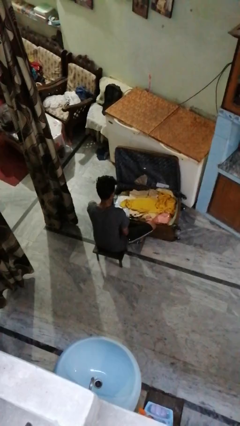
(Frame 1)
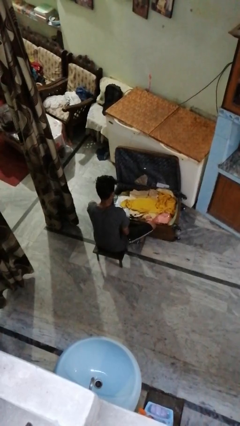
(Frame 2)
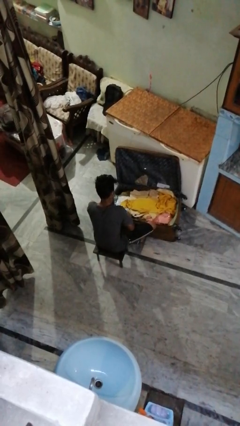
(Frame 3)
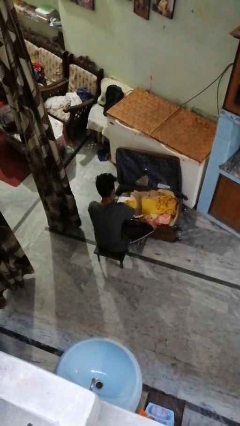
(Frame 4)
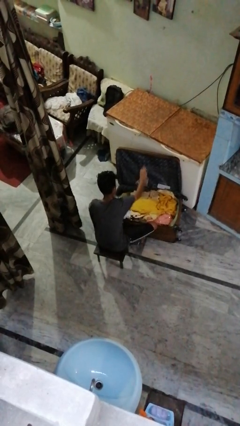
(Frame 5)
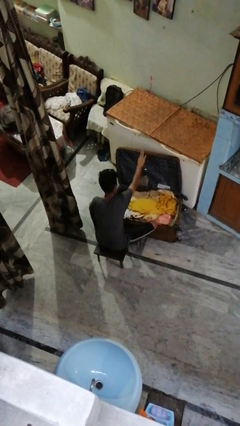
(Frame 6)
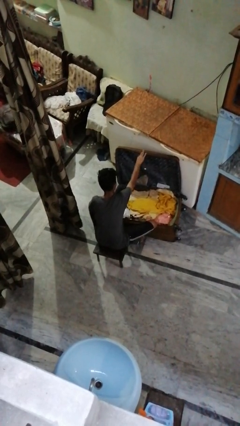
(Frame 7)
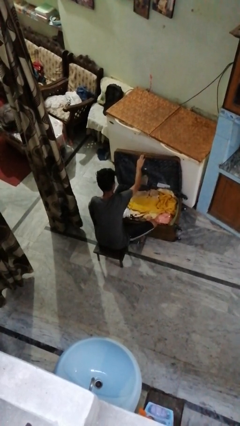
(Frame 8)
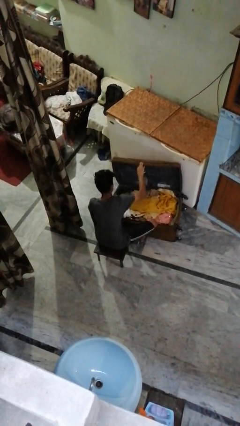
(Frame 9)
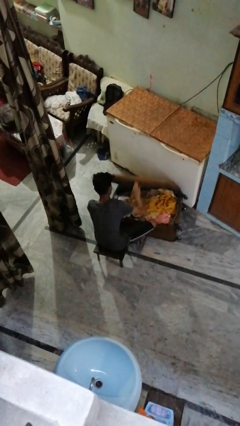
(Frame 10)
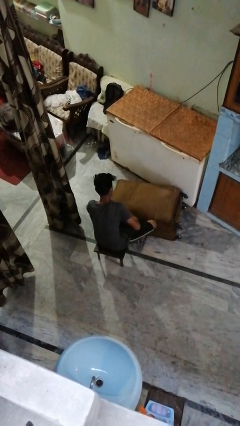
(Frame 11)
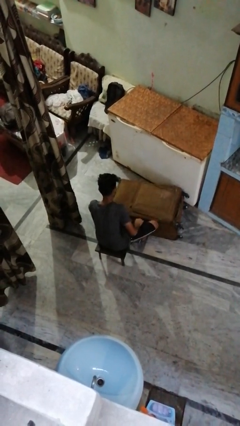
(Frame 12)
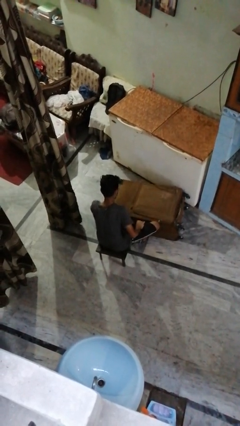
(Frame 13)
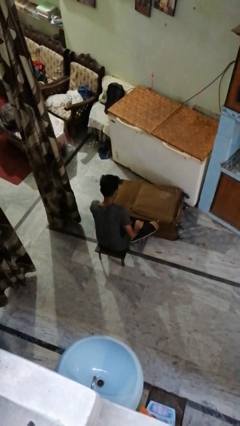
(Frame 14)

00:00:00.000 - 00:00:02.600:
person closes suitcase

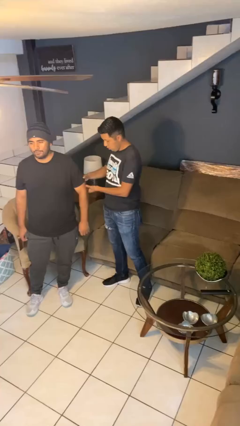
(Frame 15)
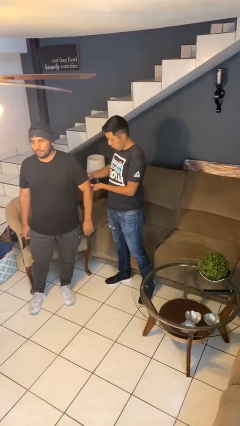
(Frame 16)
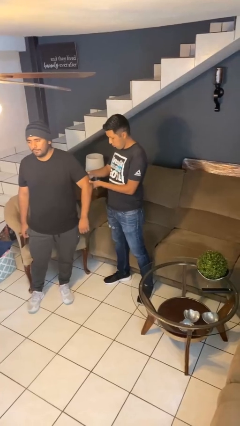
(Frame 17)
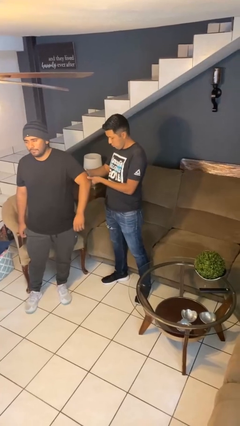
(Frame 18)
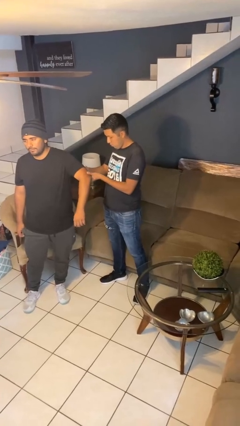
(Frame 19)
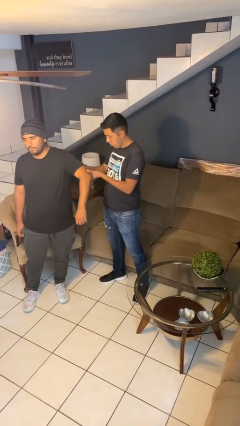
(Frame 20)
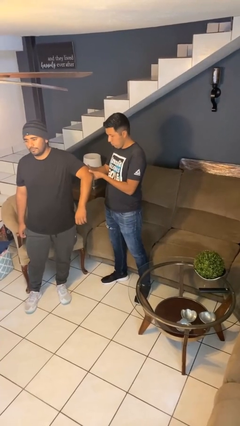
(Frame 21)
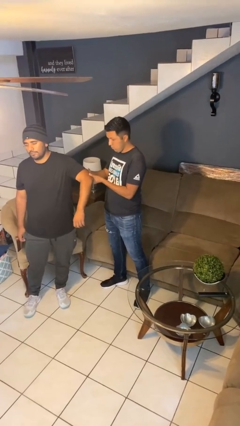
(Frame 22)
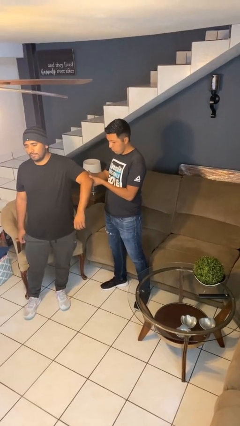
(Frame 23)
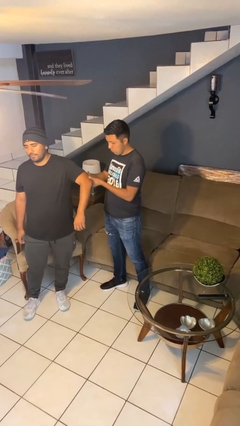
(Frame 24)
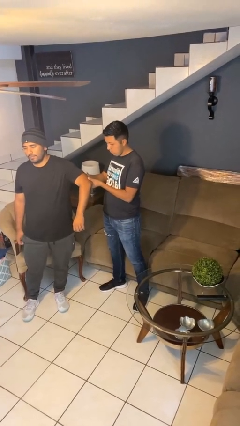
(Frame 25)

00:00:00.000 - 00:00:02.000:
person grabs person by bicep

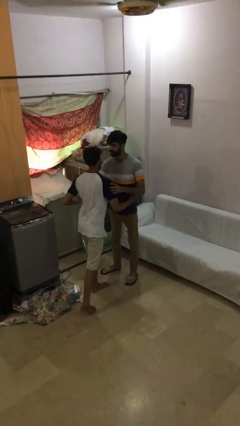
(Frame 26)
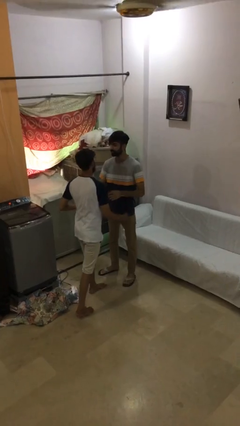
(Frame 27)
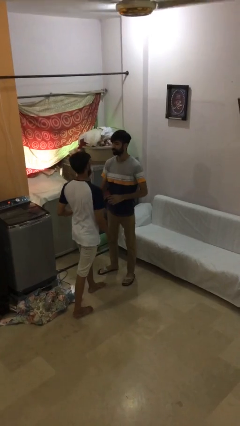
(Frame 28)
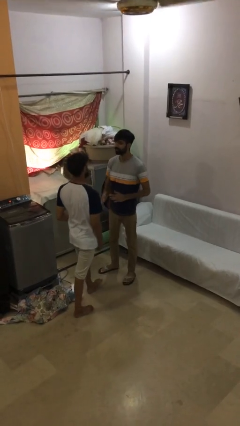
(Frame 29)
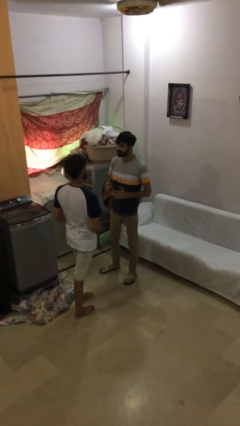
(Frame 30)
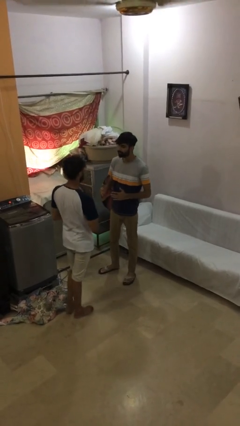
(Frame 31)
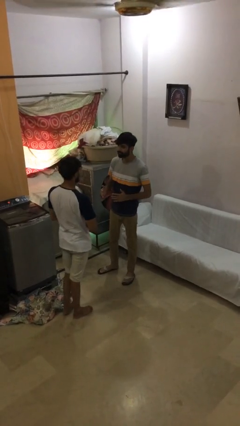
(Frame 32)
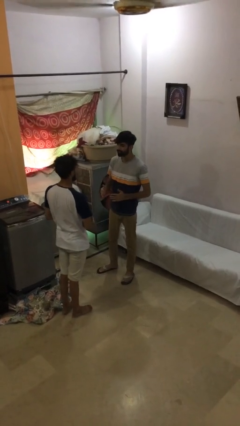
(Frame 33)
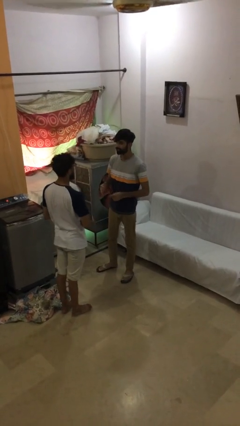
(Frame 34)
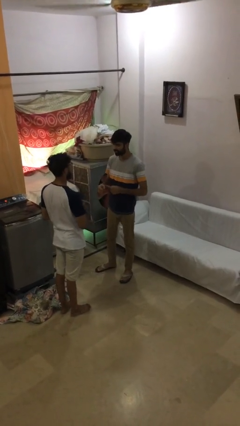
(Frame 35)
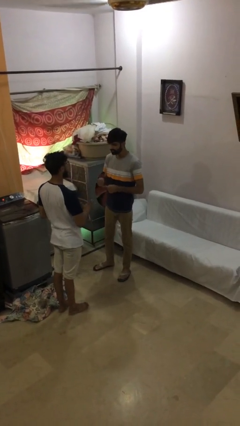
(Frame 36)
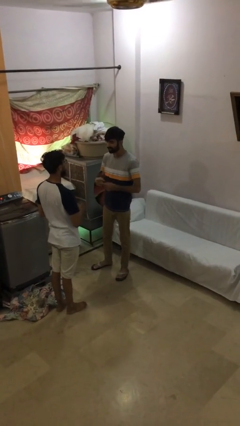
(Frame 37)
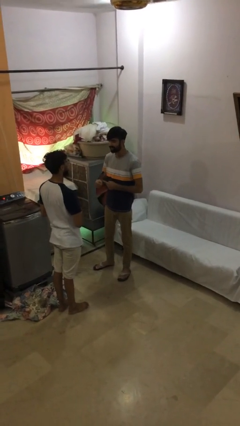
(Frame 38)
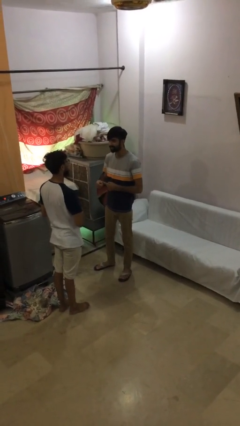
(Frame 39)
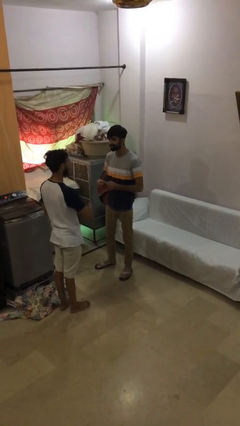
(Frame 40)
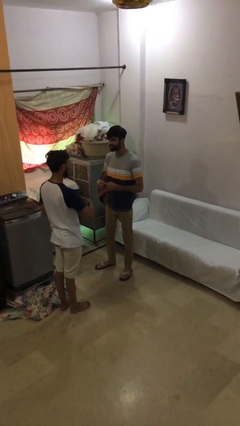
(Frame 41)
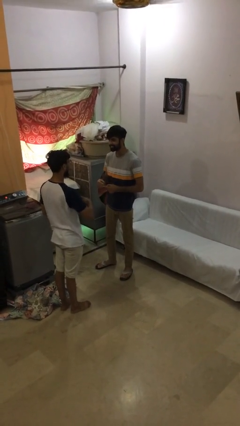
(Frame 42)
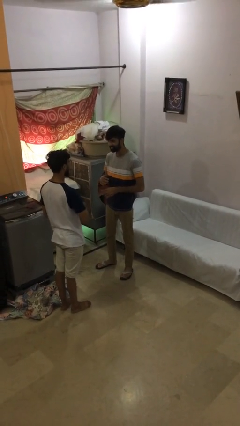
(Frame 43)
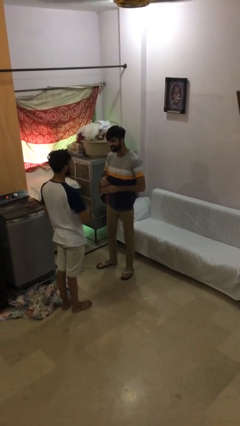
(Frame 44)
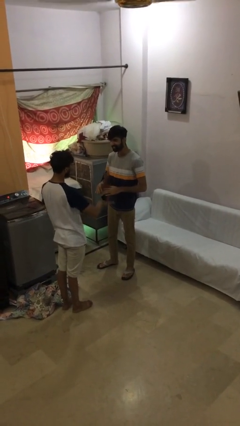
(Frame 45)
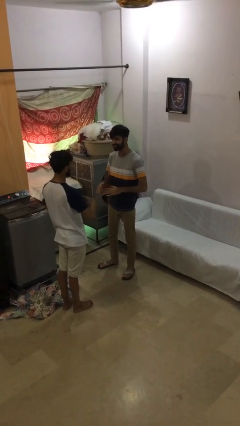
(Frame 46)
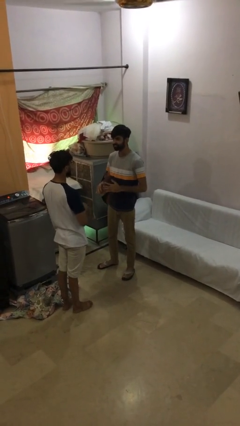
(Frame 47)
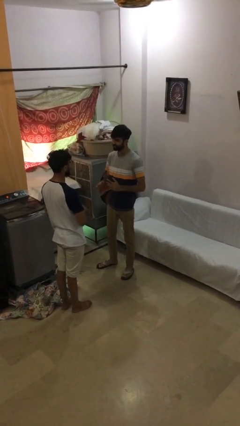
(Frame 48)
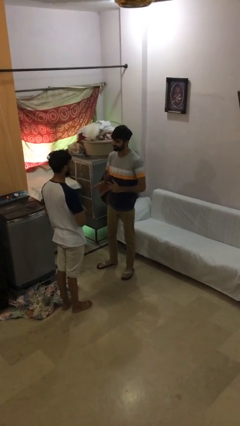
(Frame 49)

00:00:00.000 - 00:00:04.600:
person talks to person

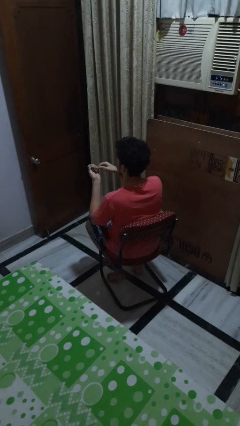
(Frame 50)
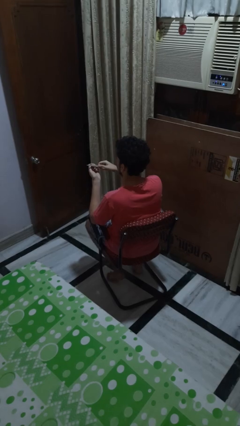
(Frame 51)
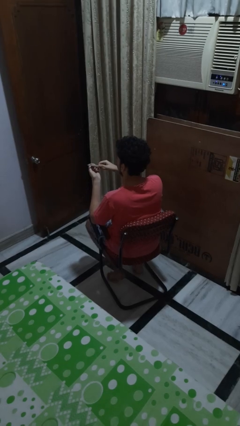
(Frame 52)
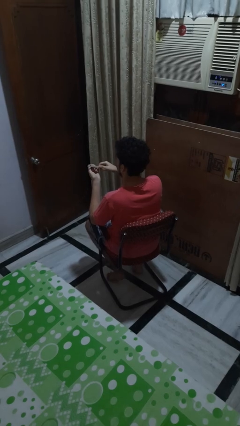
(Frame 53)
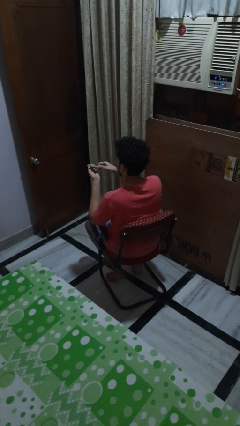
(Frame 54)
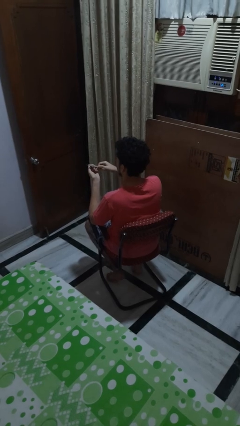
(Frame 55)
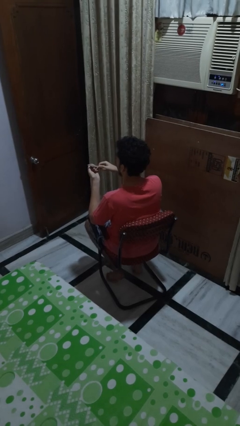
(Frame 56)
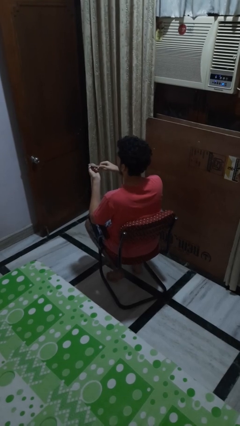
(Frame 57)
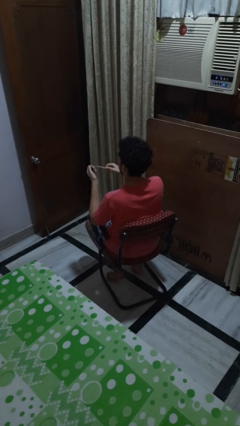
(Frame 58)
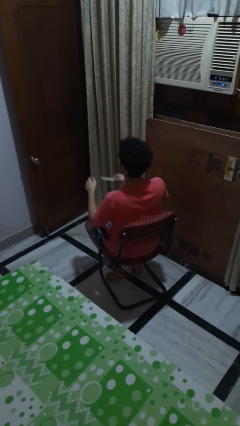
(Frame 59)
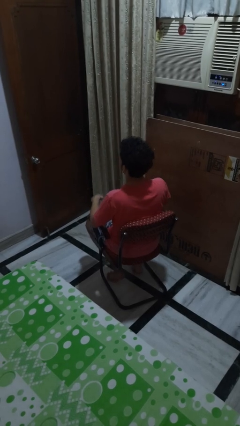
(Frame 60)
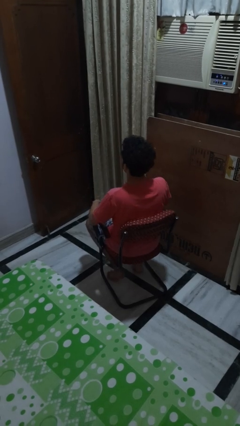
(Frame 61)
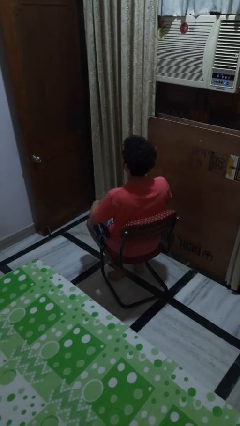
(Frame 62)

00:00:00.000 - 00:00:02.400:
person files fingernails

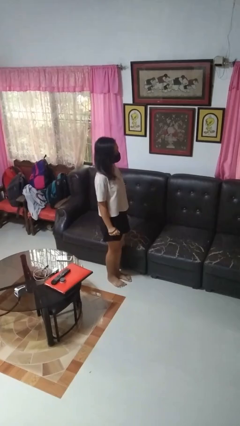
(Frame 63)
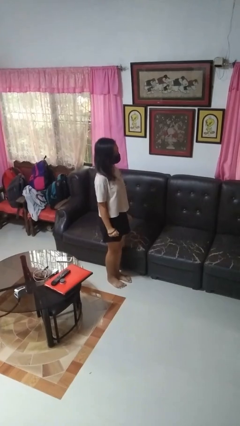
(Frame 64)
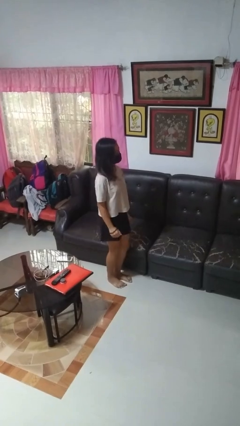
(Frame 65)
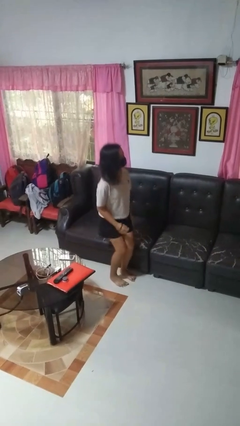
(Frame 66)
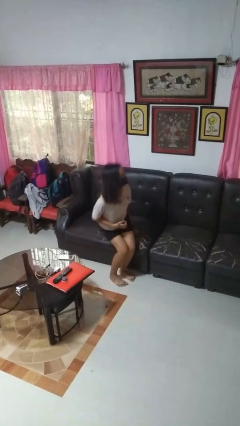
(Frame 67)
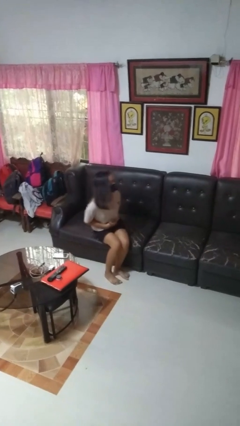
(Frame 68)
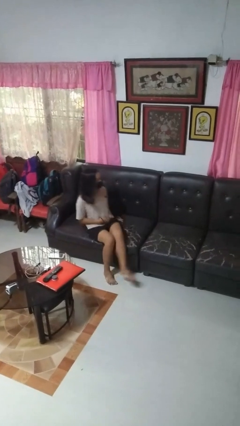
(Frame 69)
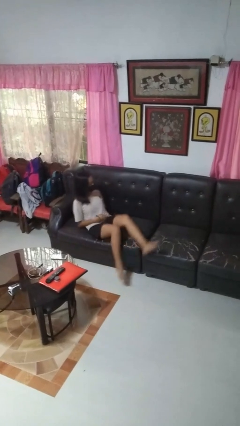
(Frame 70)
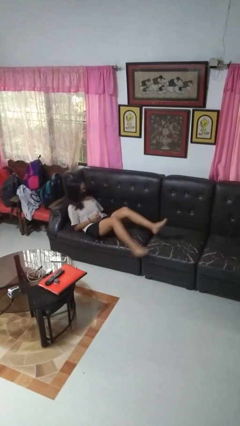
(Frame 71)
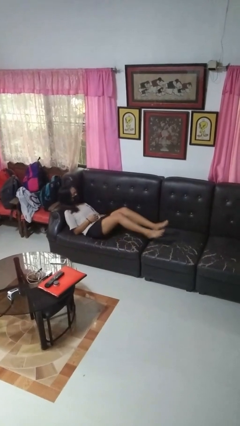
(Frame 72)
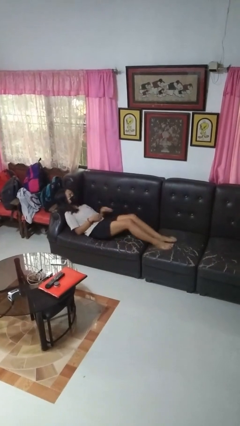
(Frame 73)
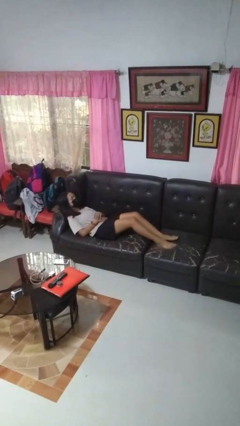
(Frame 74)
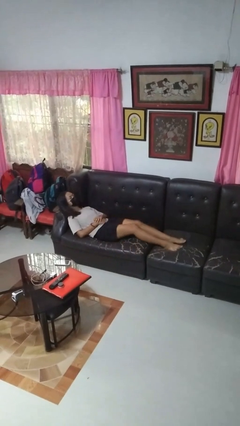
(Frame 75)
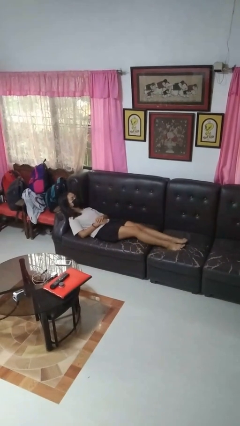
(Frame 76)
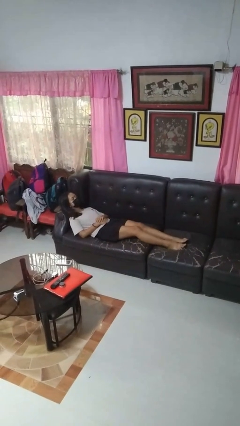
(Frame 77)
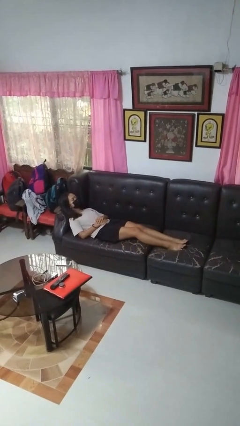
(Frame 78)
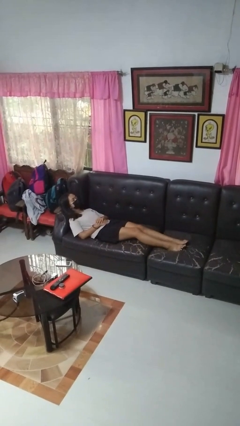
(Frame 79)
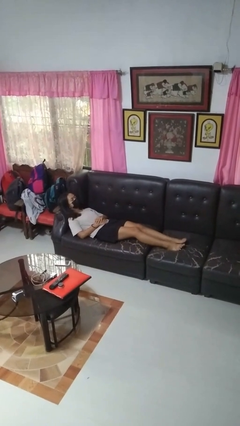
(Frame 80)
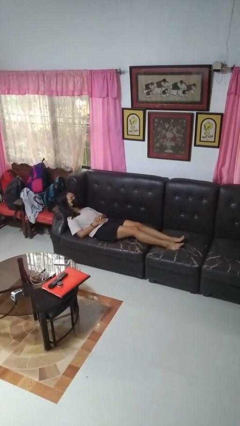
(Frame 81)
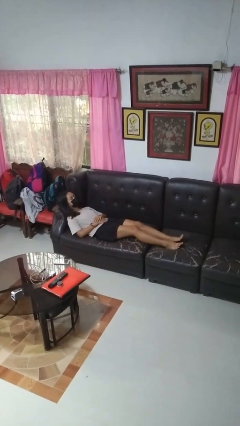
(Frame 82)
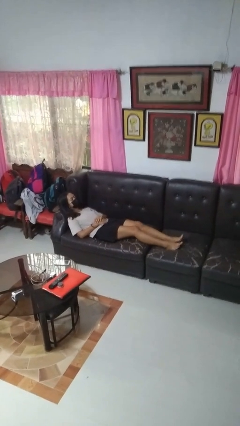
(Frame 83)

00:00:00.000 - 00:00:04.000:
person lies down on couch

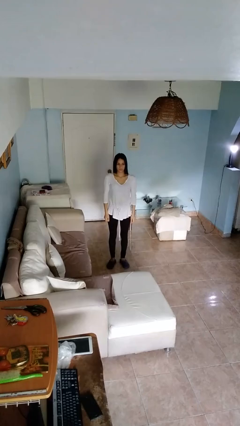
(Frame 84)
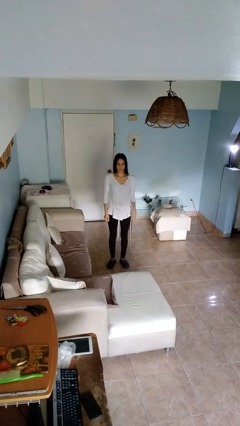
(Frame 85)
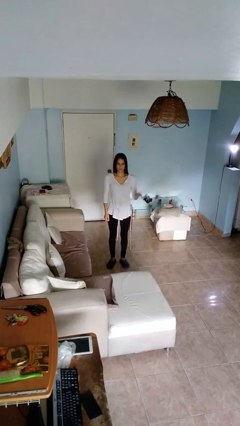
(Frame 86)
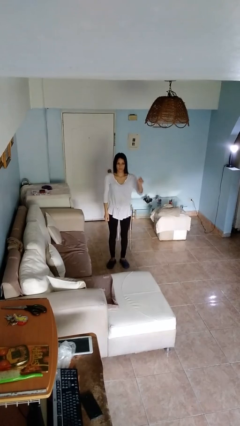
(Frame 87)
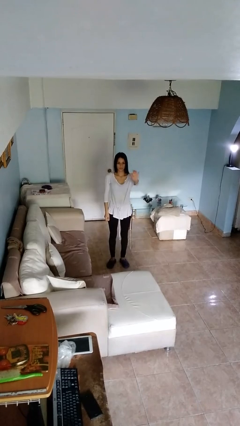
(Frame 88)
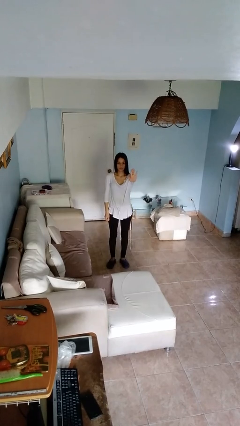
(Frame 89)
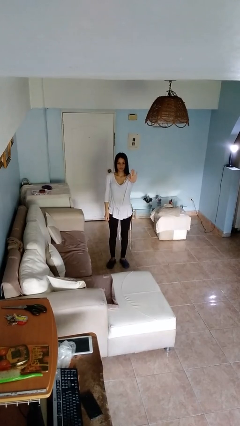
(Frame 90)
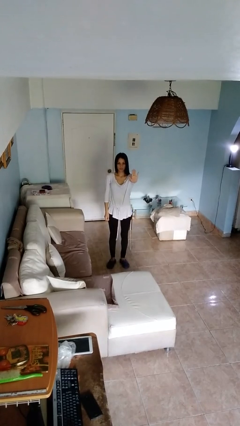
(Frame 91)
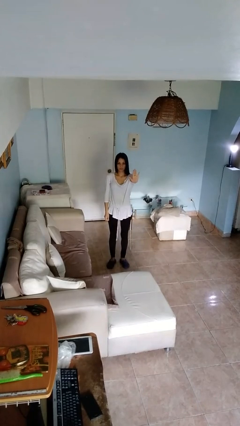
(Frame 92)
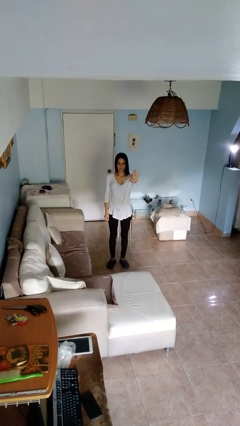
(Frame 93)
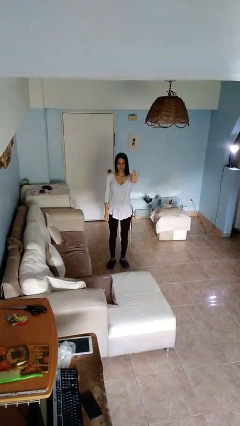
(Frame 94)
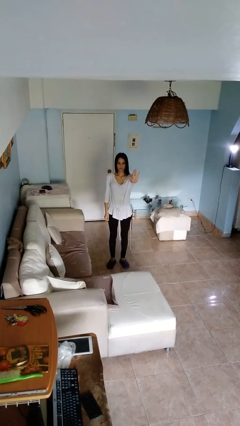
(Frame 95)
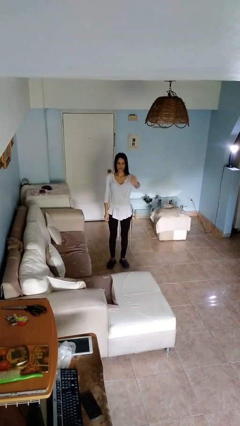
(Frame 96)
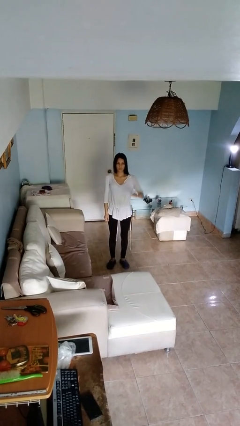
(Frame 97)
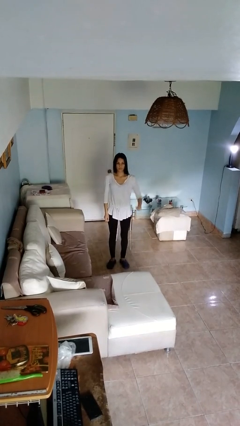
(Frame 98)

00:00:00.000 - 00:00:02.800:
person gestures stop
